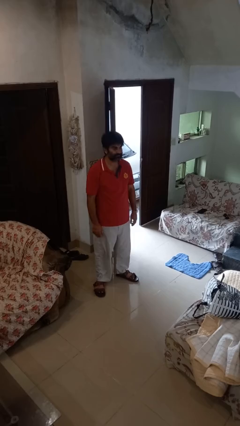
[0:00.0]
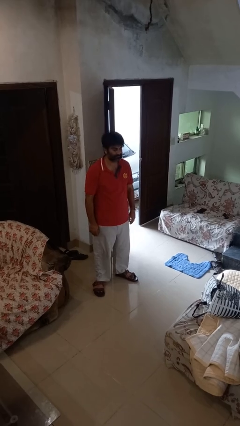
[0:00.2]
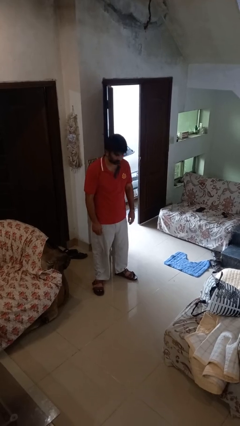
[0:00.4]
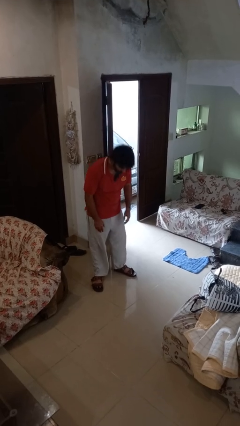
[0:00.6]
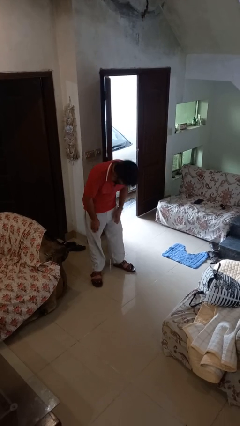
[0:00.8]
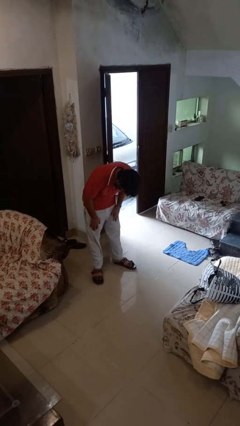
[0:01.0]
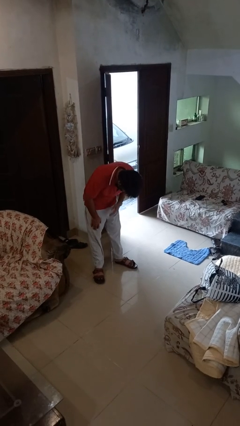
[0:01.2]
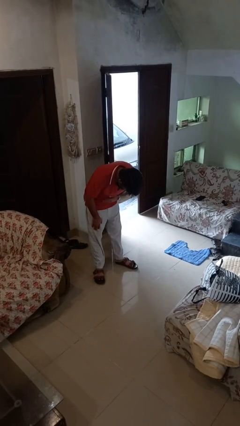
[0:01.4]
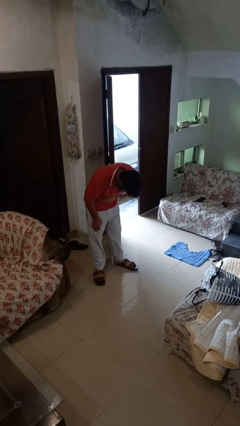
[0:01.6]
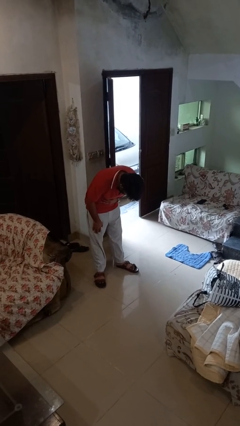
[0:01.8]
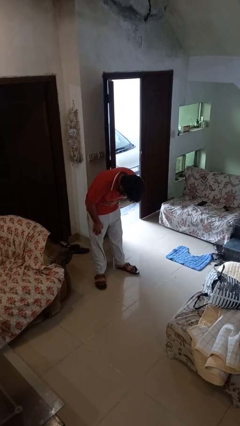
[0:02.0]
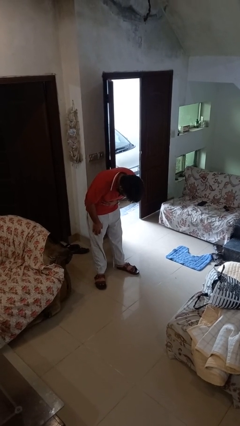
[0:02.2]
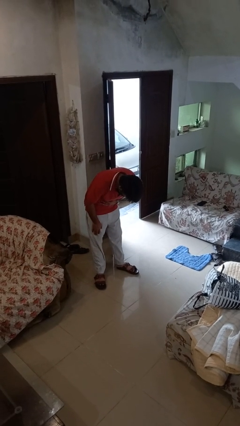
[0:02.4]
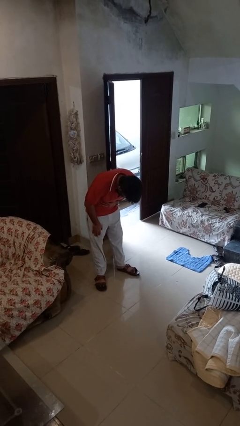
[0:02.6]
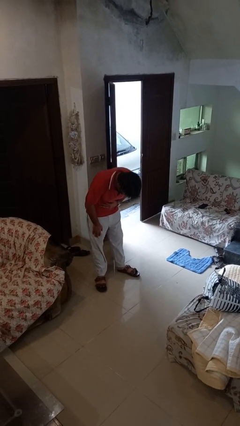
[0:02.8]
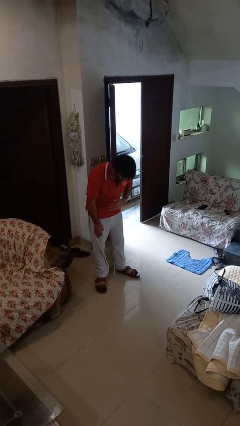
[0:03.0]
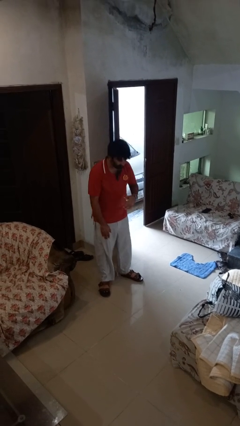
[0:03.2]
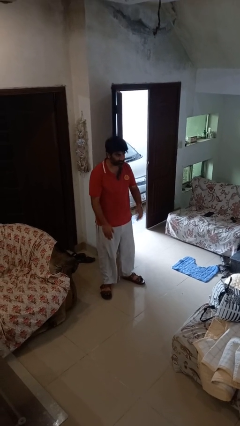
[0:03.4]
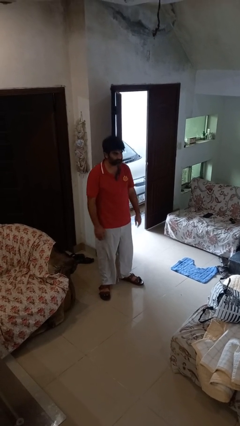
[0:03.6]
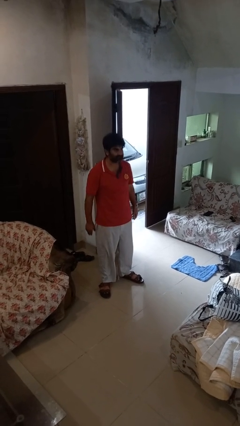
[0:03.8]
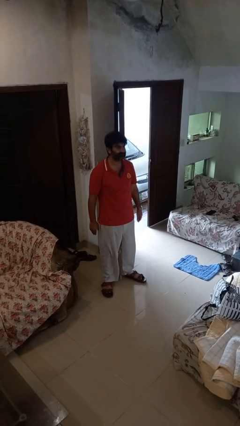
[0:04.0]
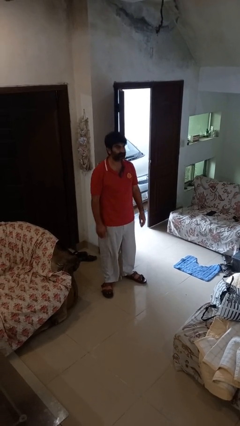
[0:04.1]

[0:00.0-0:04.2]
person bows

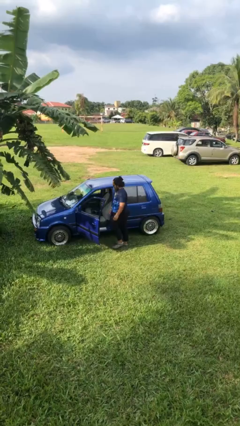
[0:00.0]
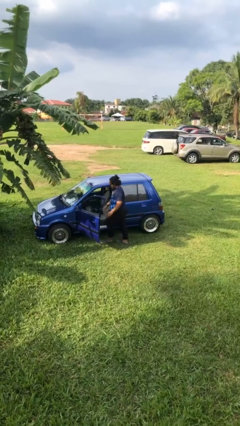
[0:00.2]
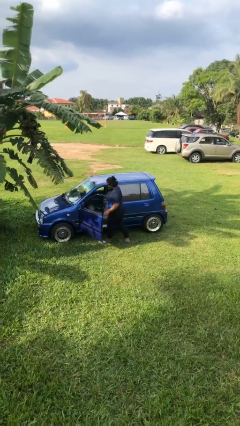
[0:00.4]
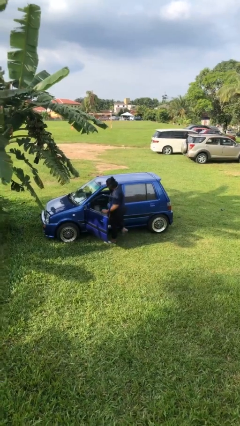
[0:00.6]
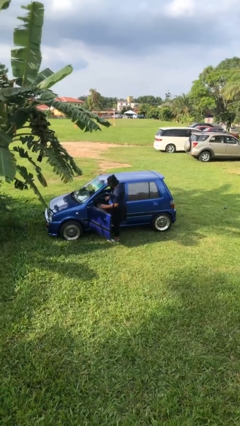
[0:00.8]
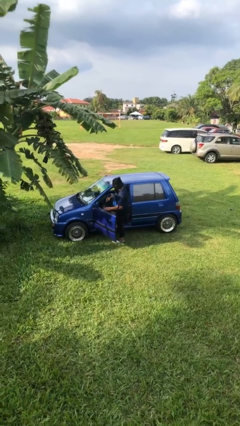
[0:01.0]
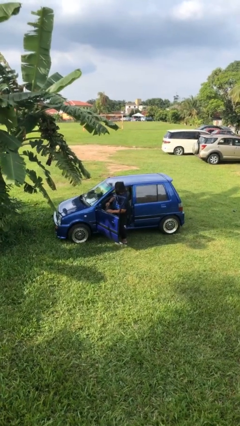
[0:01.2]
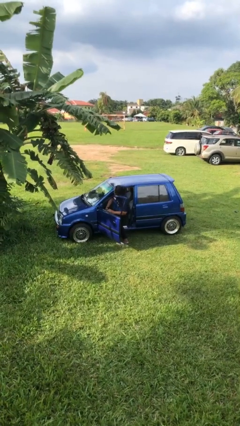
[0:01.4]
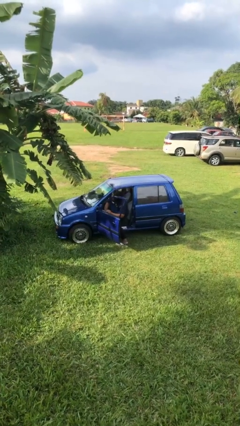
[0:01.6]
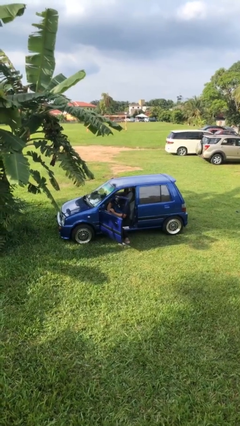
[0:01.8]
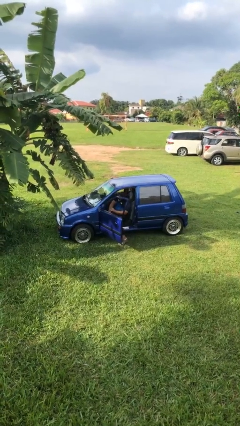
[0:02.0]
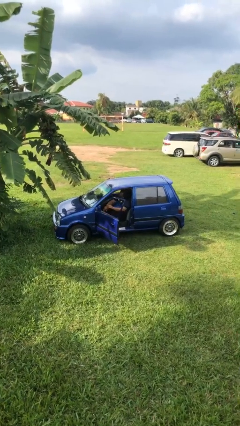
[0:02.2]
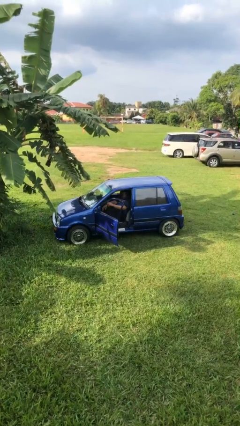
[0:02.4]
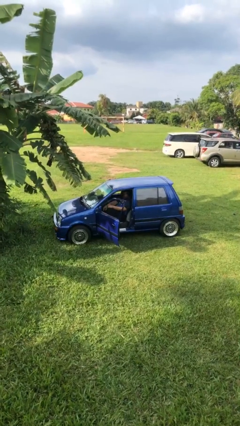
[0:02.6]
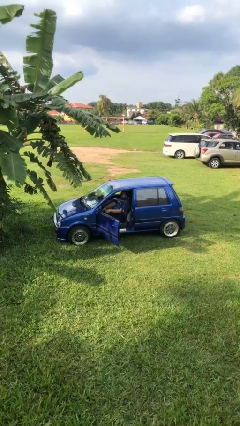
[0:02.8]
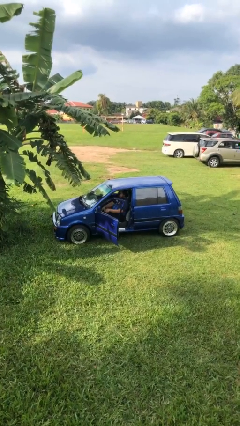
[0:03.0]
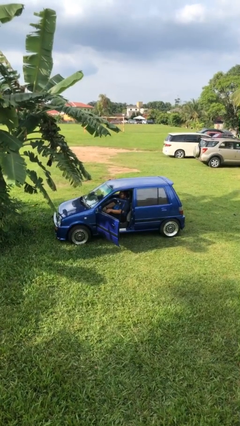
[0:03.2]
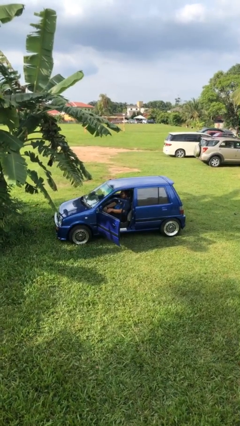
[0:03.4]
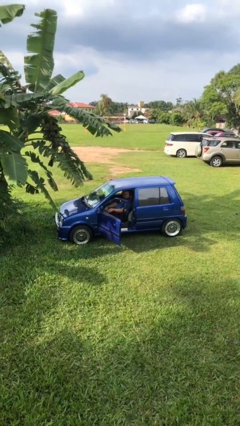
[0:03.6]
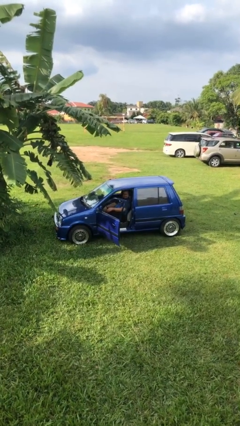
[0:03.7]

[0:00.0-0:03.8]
person enters car

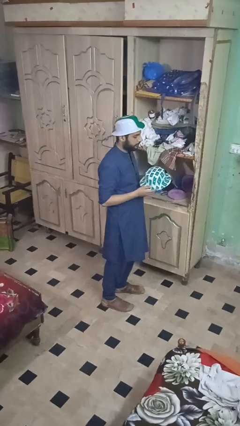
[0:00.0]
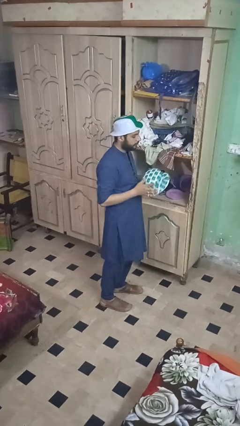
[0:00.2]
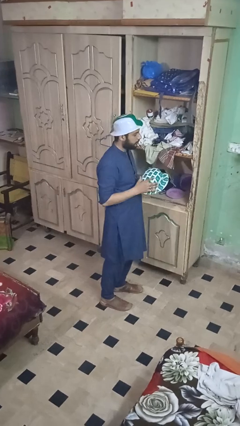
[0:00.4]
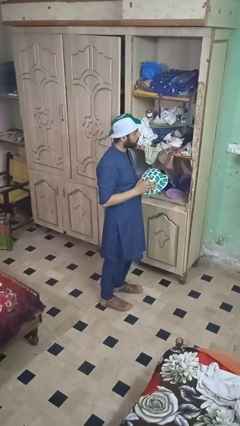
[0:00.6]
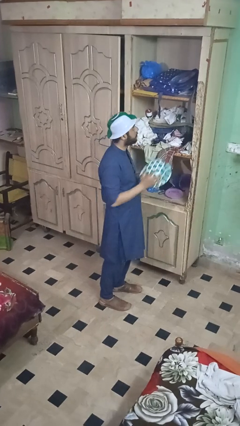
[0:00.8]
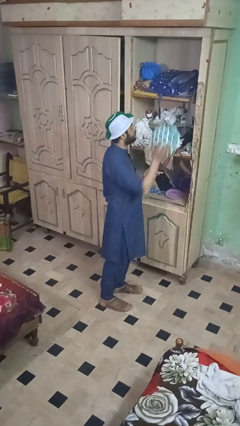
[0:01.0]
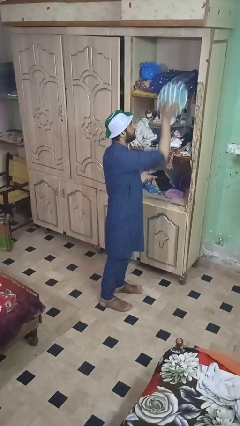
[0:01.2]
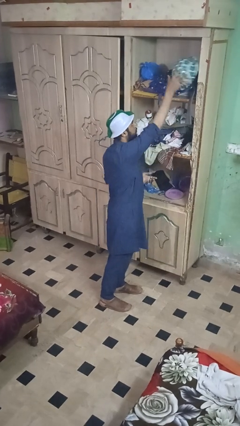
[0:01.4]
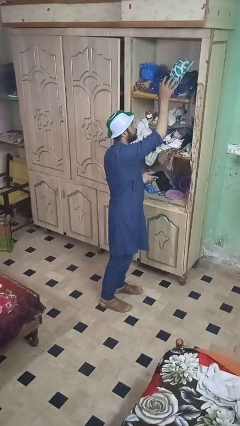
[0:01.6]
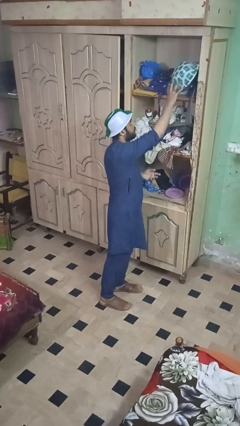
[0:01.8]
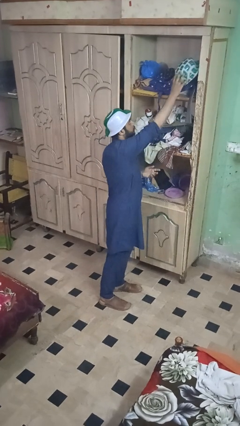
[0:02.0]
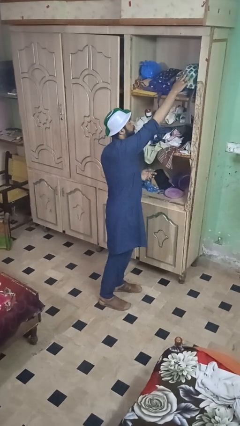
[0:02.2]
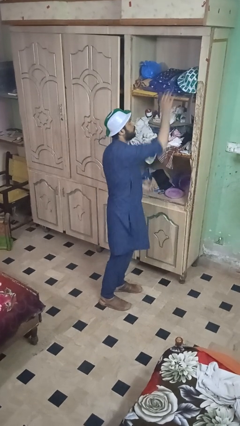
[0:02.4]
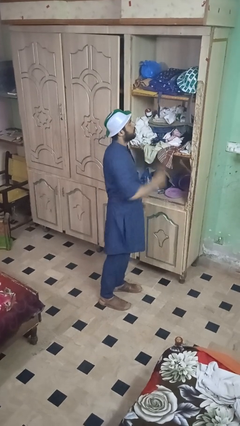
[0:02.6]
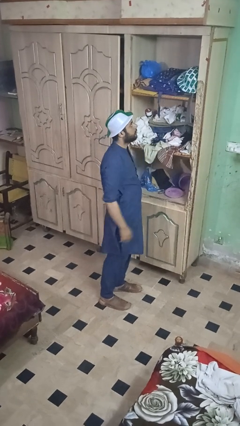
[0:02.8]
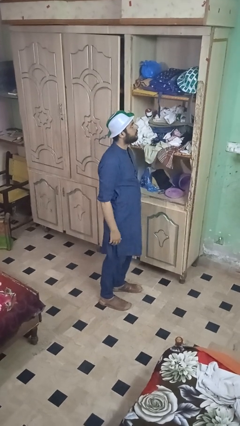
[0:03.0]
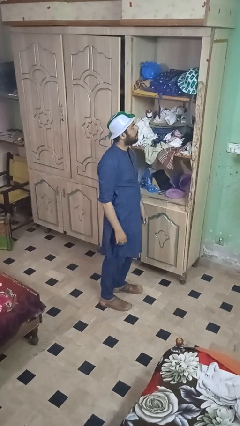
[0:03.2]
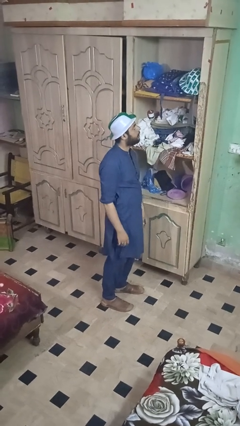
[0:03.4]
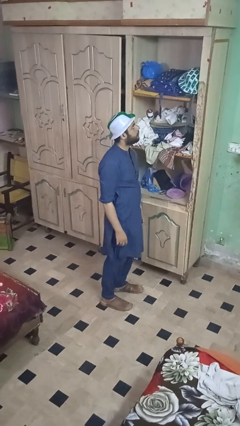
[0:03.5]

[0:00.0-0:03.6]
person puts down object on shelf

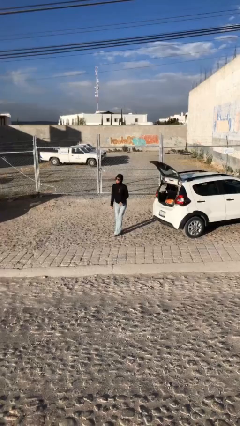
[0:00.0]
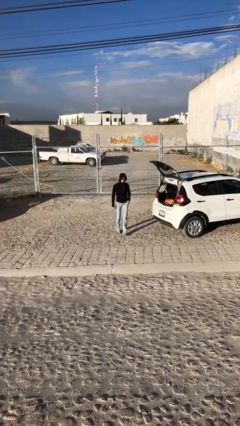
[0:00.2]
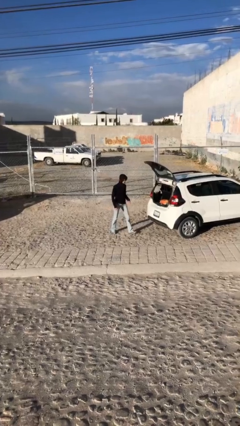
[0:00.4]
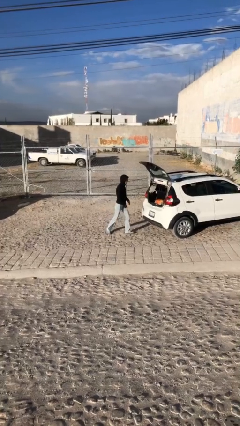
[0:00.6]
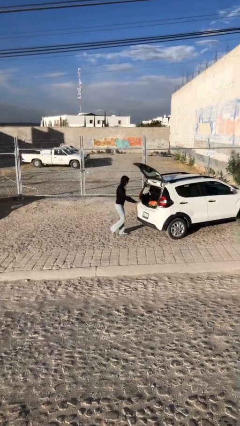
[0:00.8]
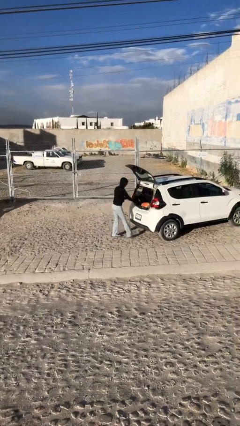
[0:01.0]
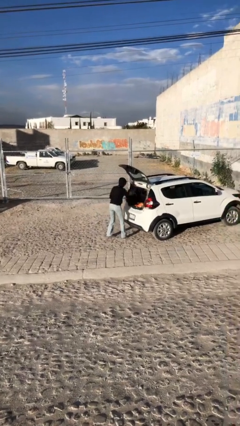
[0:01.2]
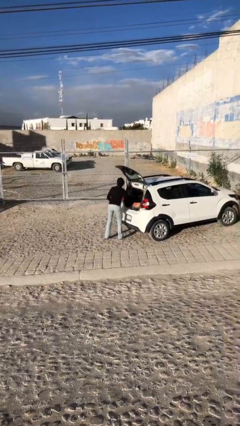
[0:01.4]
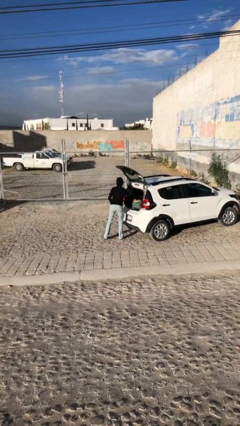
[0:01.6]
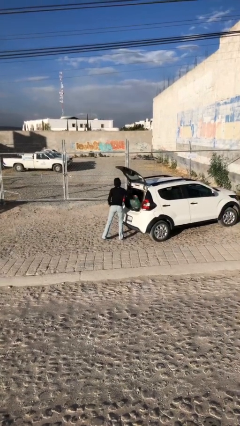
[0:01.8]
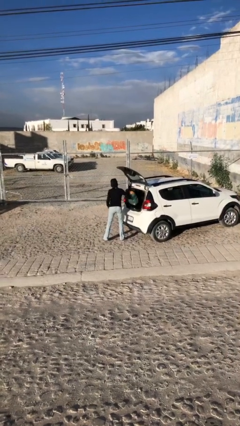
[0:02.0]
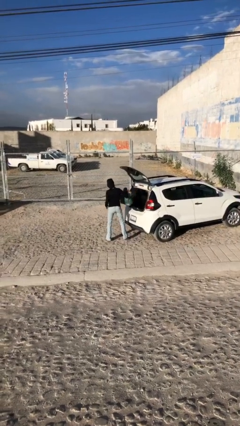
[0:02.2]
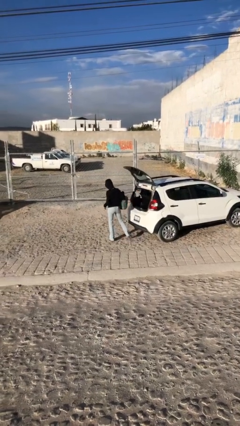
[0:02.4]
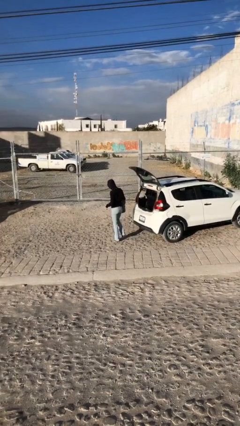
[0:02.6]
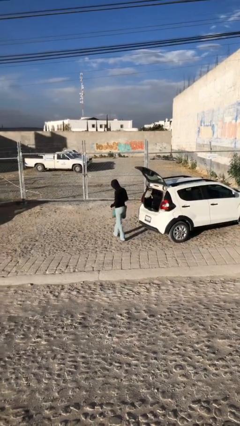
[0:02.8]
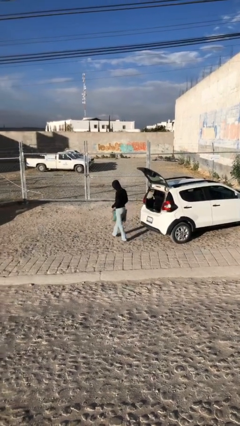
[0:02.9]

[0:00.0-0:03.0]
person unloads car

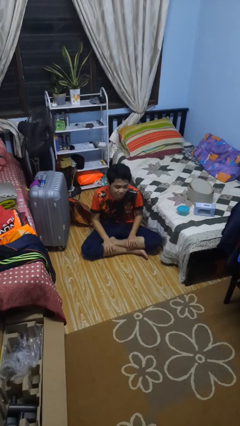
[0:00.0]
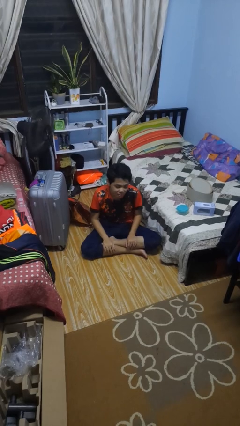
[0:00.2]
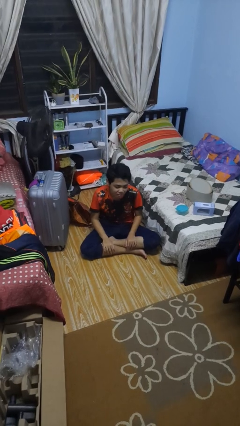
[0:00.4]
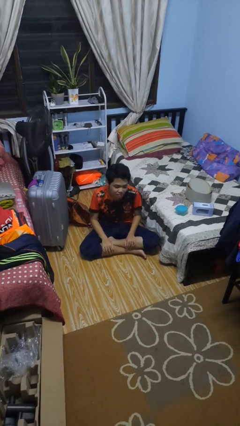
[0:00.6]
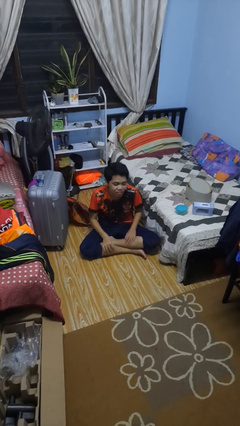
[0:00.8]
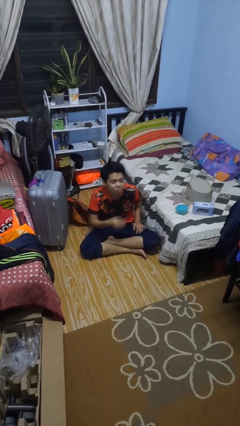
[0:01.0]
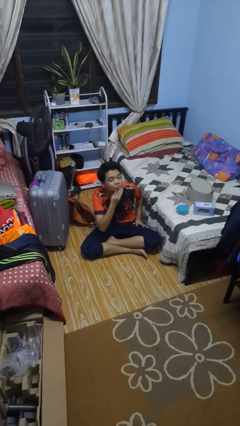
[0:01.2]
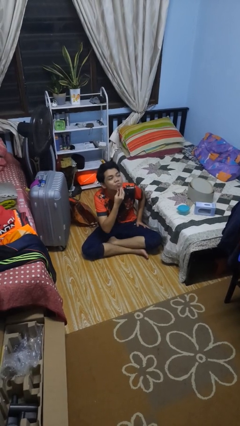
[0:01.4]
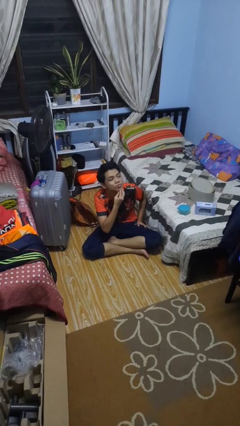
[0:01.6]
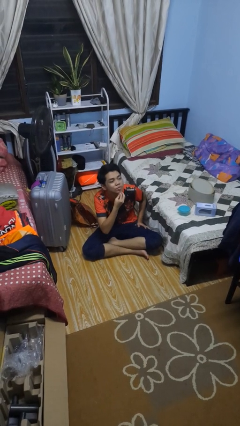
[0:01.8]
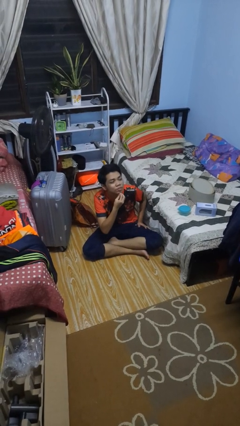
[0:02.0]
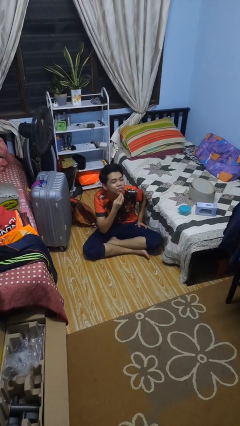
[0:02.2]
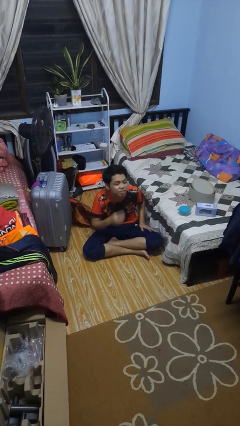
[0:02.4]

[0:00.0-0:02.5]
person strokes chin

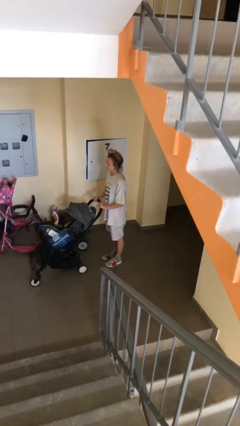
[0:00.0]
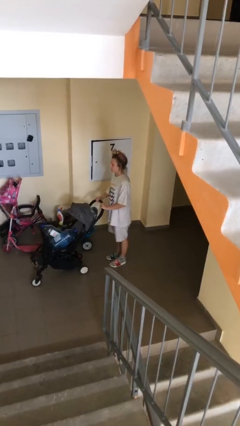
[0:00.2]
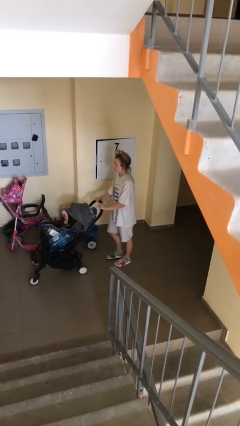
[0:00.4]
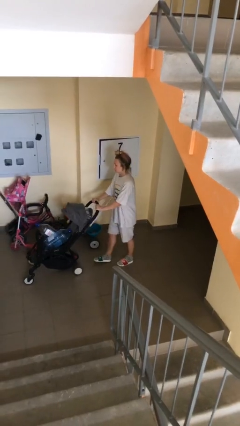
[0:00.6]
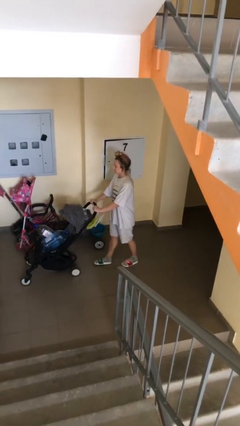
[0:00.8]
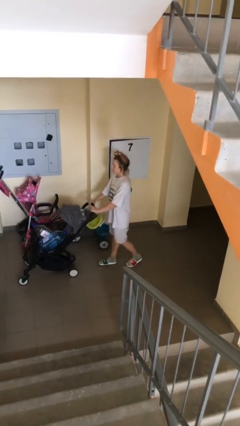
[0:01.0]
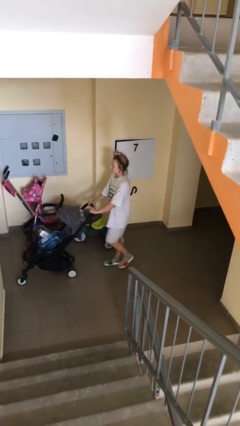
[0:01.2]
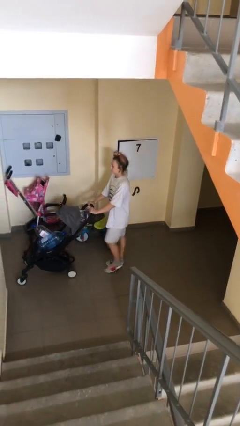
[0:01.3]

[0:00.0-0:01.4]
person pushes wheeled cart
